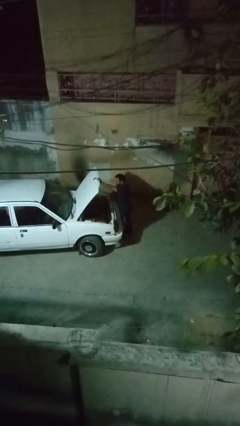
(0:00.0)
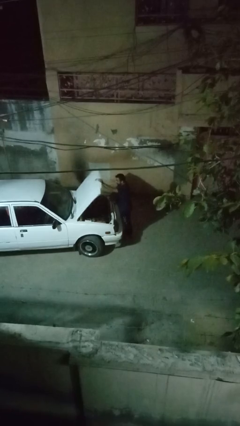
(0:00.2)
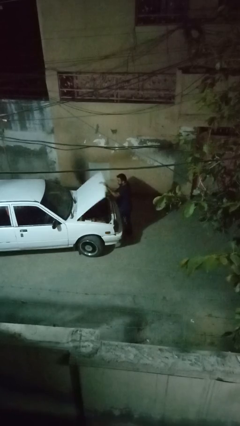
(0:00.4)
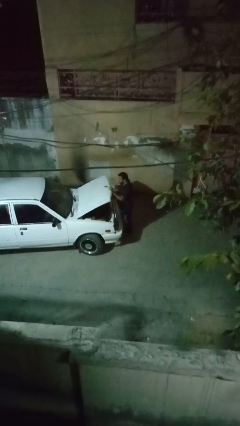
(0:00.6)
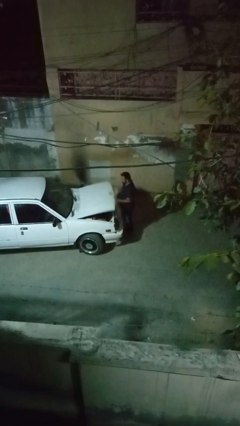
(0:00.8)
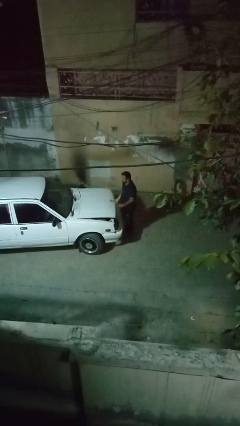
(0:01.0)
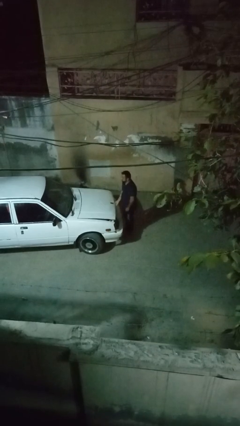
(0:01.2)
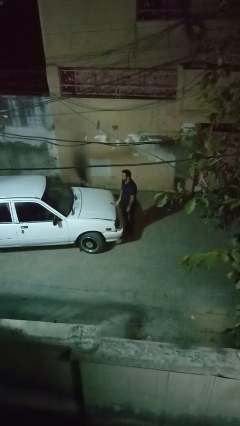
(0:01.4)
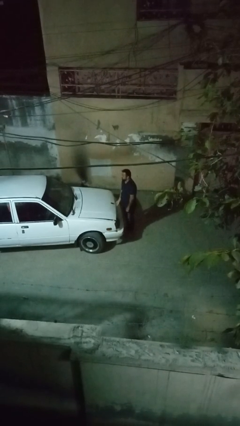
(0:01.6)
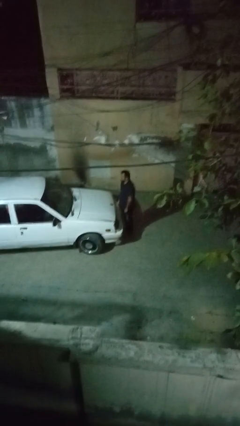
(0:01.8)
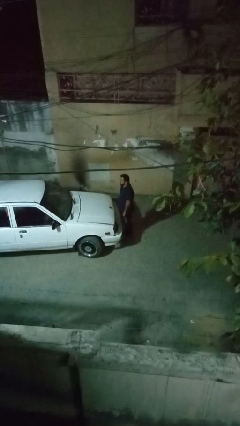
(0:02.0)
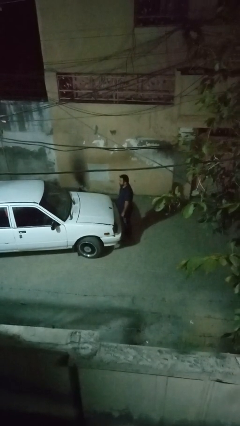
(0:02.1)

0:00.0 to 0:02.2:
person closes car hood

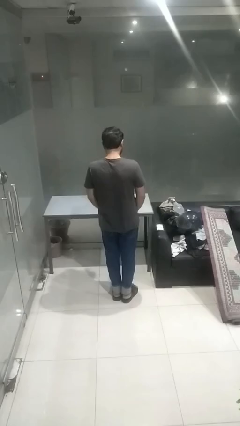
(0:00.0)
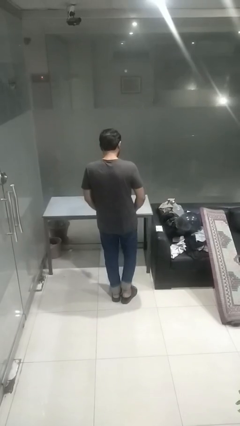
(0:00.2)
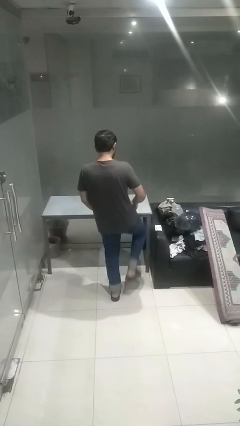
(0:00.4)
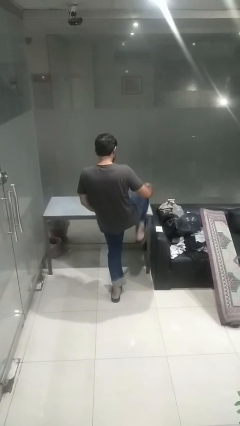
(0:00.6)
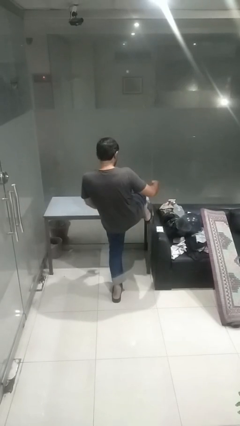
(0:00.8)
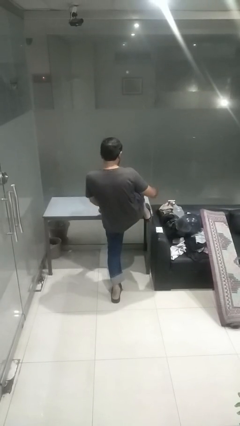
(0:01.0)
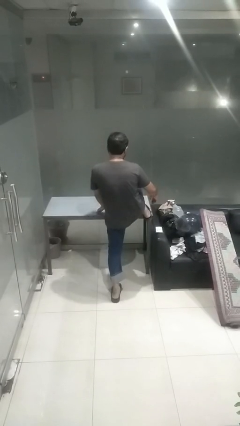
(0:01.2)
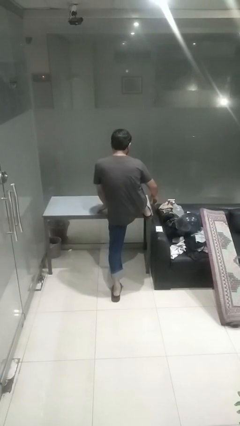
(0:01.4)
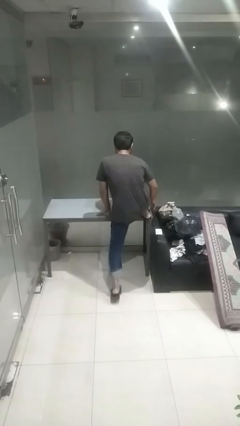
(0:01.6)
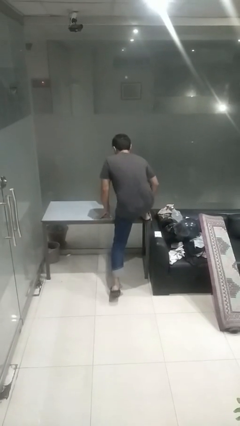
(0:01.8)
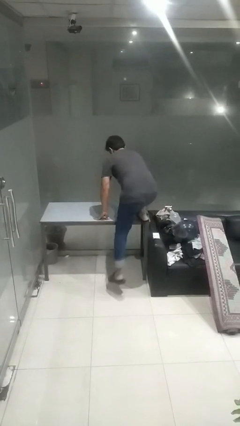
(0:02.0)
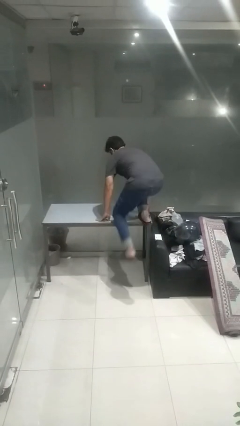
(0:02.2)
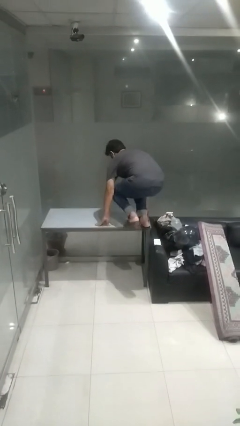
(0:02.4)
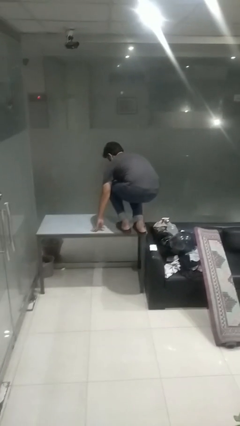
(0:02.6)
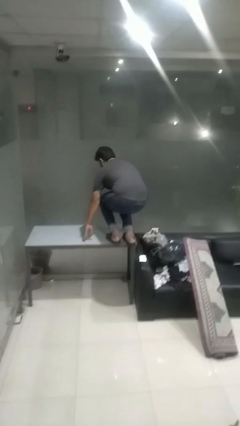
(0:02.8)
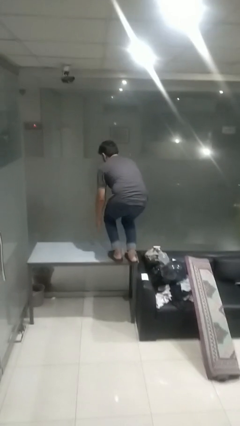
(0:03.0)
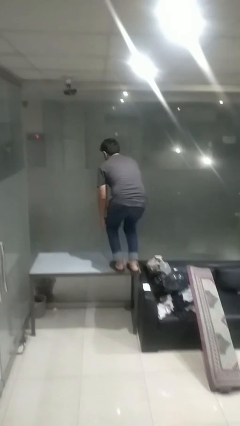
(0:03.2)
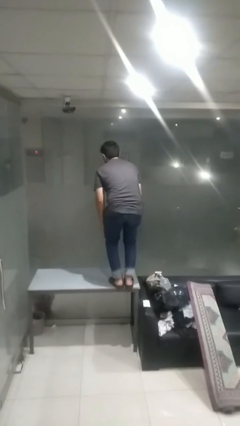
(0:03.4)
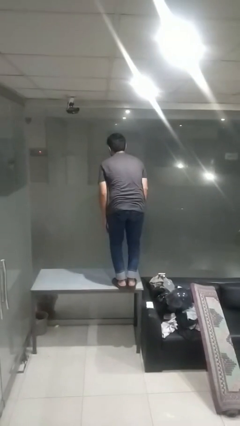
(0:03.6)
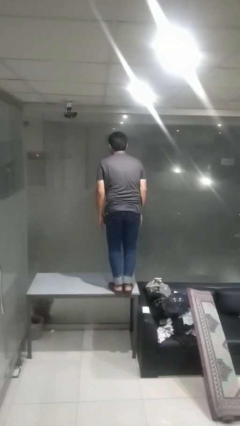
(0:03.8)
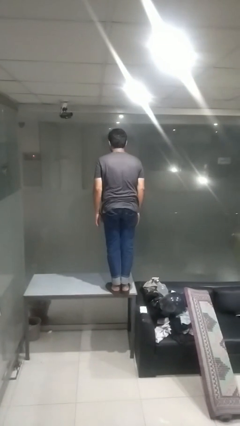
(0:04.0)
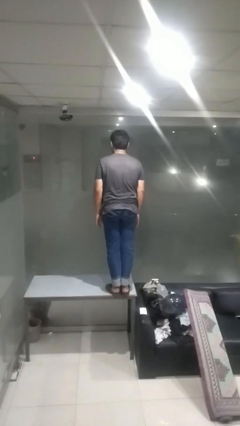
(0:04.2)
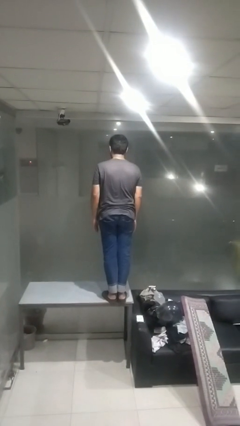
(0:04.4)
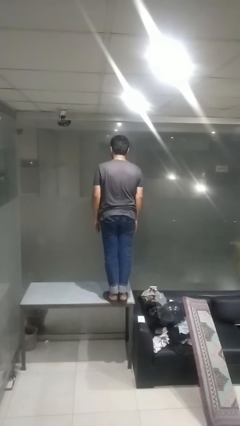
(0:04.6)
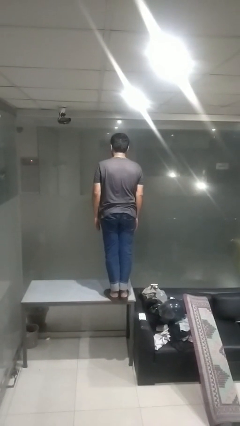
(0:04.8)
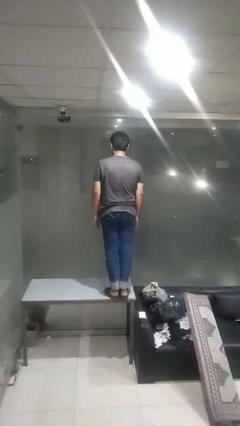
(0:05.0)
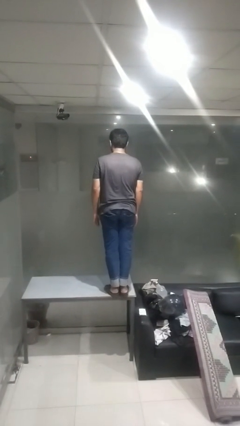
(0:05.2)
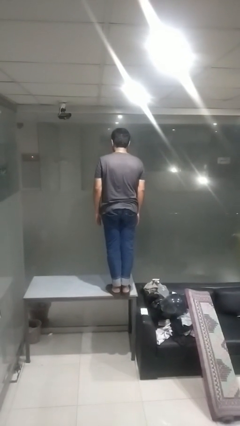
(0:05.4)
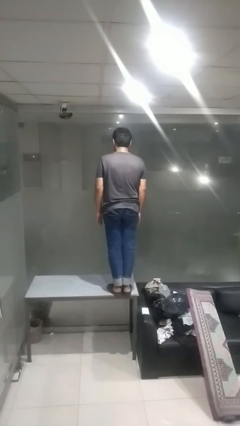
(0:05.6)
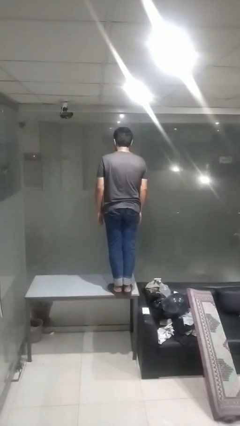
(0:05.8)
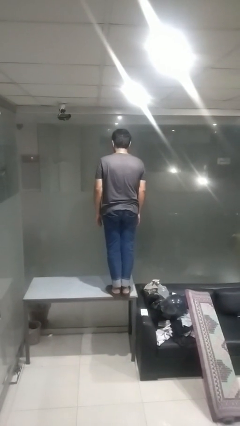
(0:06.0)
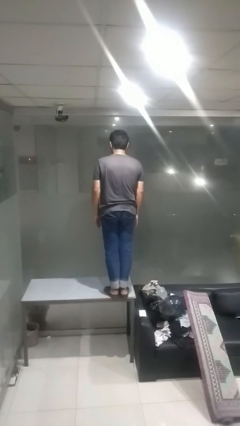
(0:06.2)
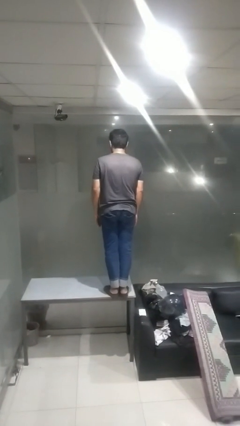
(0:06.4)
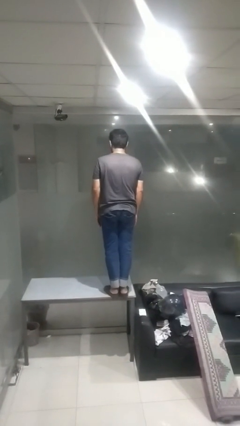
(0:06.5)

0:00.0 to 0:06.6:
person climbs on table

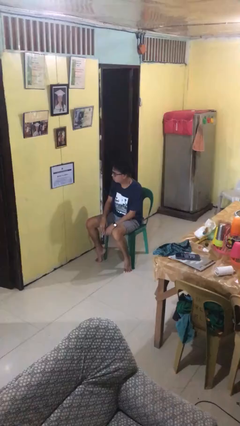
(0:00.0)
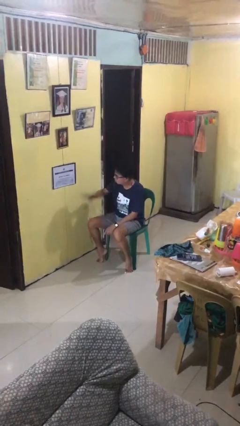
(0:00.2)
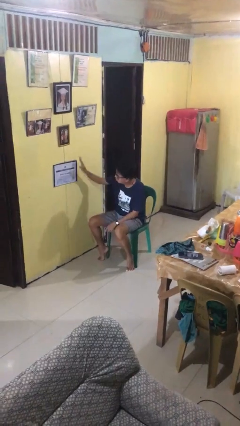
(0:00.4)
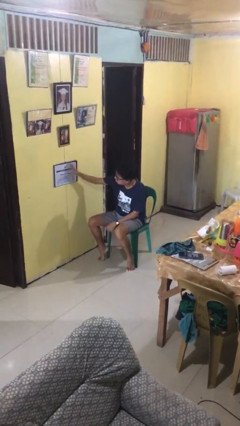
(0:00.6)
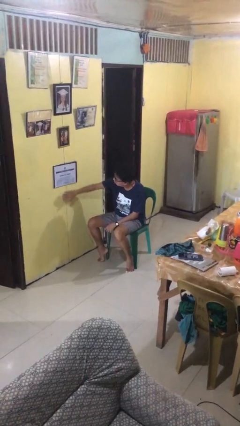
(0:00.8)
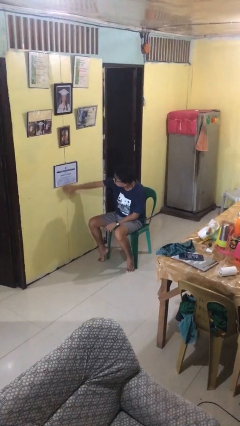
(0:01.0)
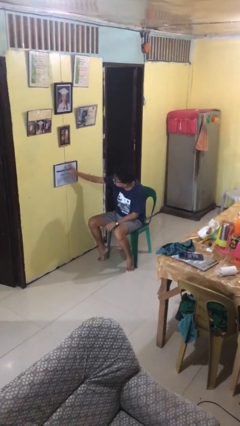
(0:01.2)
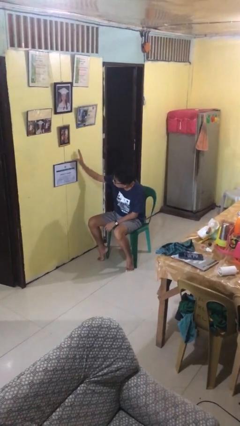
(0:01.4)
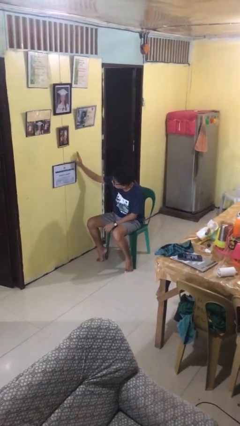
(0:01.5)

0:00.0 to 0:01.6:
person waves hand over object

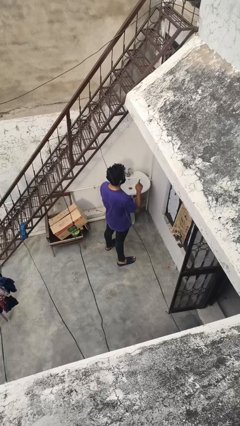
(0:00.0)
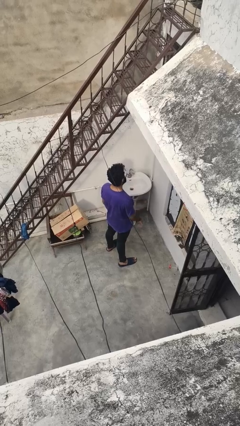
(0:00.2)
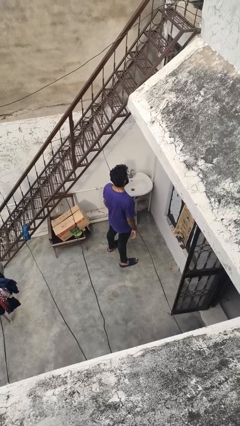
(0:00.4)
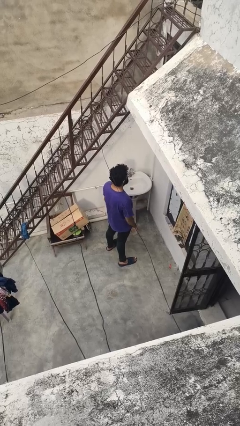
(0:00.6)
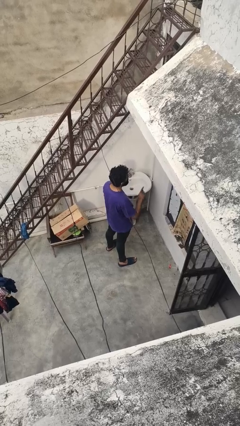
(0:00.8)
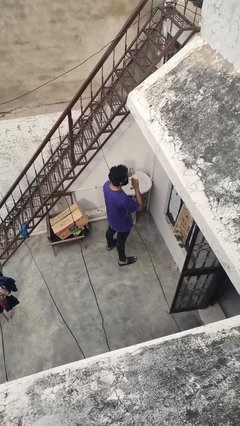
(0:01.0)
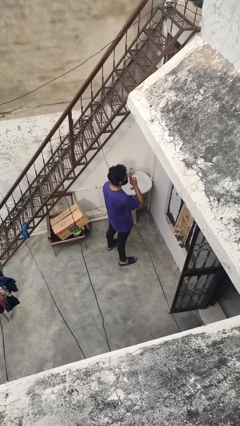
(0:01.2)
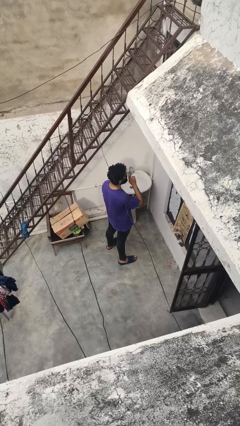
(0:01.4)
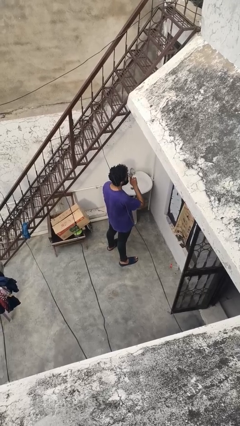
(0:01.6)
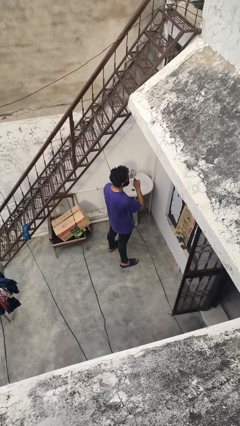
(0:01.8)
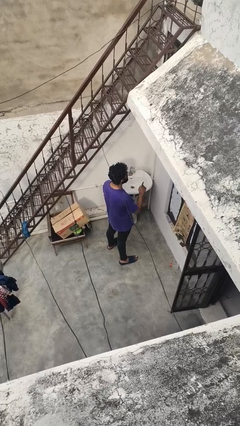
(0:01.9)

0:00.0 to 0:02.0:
person gestures be quiet

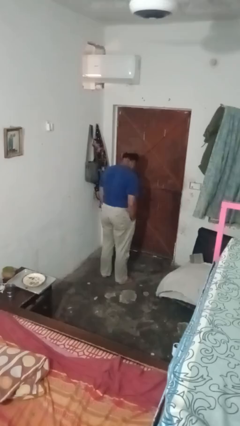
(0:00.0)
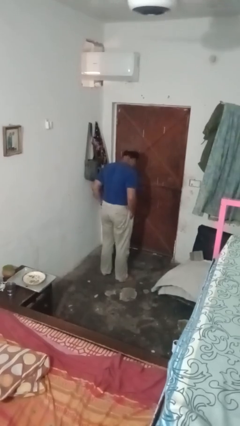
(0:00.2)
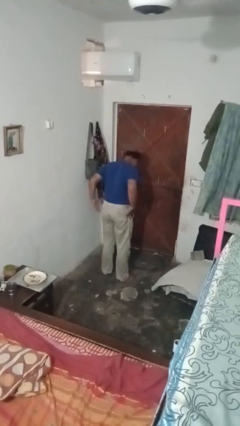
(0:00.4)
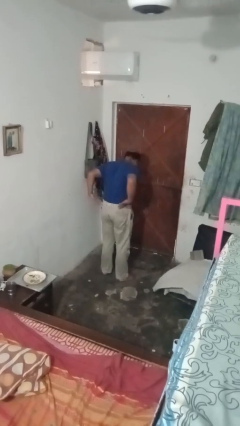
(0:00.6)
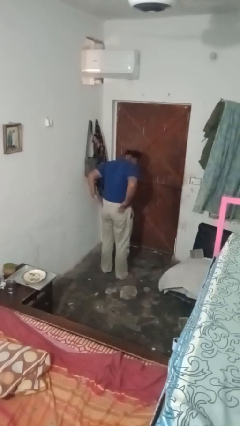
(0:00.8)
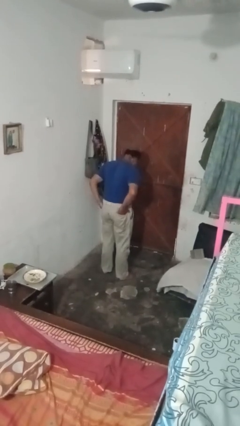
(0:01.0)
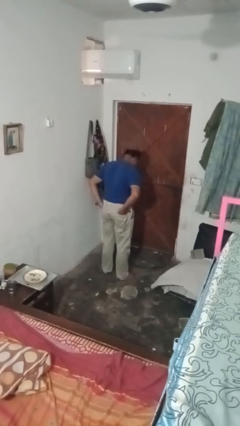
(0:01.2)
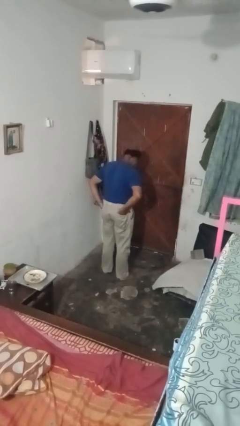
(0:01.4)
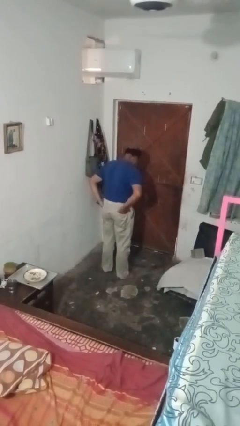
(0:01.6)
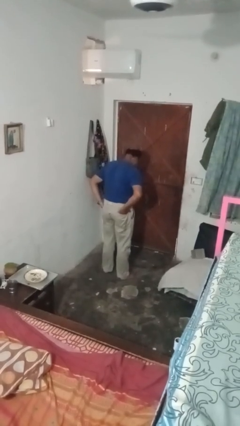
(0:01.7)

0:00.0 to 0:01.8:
person puts hands in back pockets

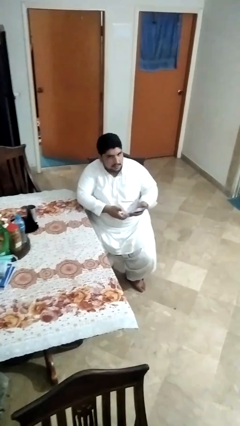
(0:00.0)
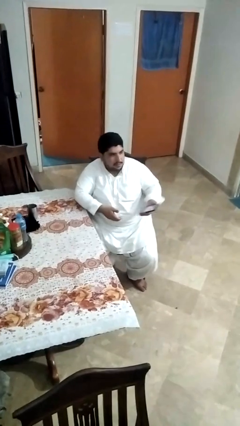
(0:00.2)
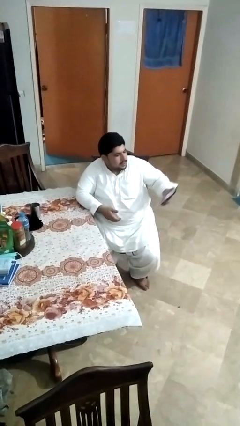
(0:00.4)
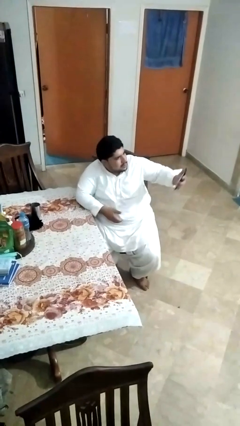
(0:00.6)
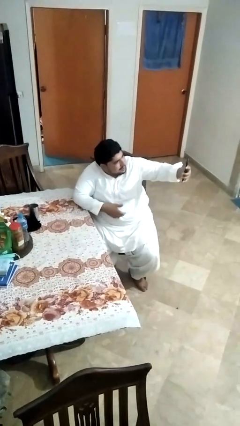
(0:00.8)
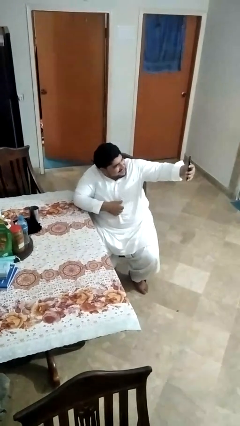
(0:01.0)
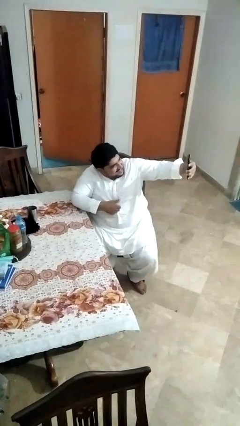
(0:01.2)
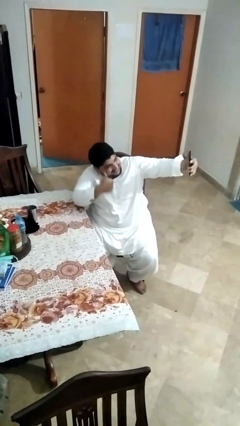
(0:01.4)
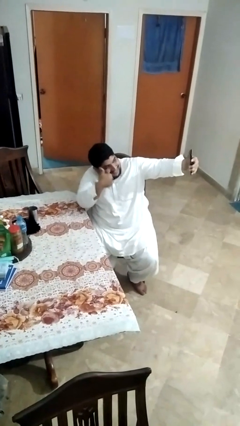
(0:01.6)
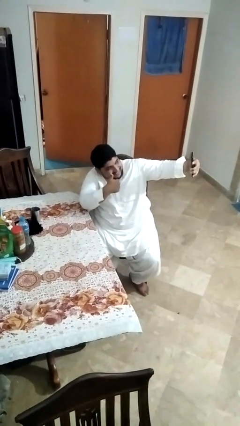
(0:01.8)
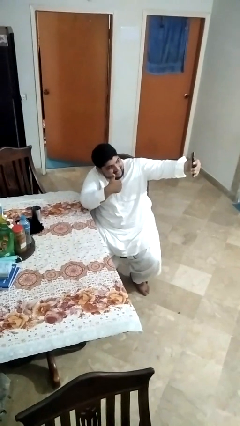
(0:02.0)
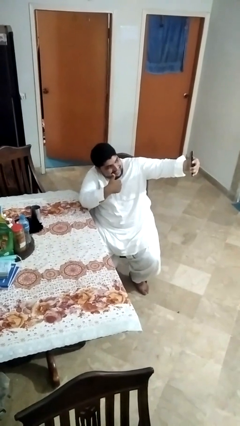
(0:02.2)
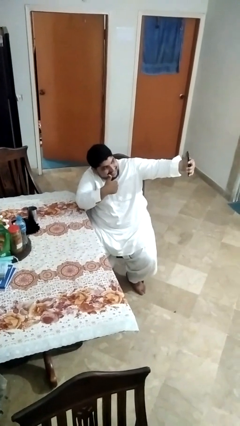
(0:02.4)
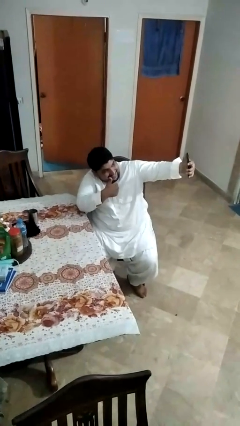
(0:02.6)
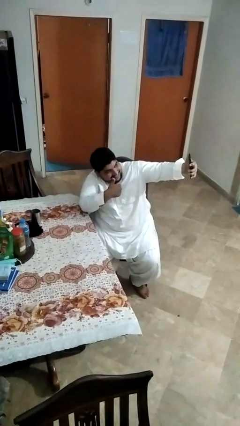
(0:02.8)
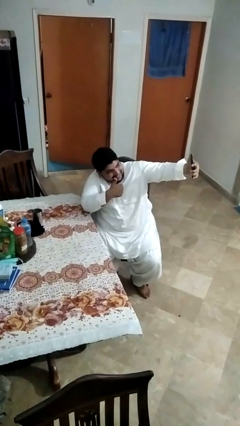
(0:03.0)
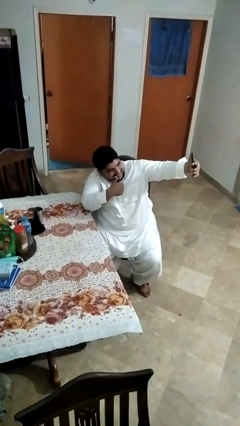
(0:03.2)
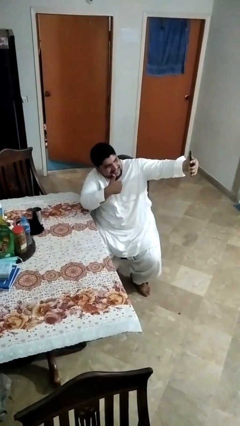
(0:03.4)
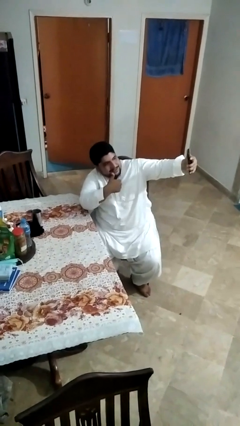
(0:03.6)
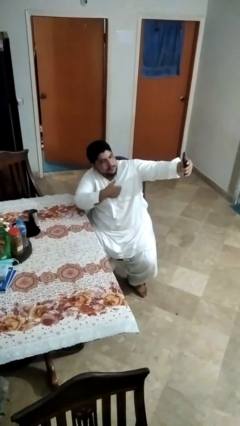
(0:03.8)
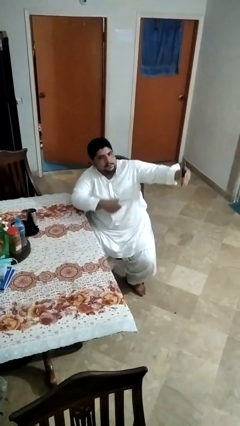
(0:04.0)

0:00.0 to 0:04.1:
person takes selfie
